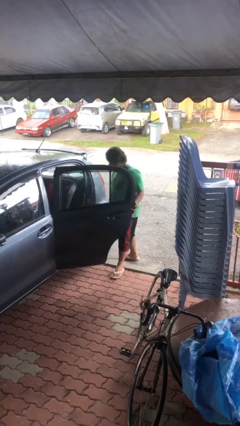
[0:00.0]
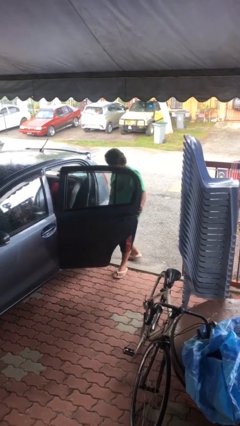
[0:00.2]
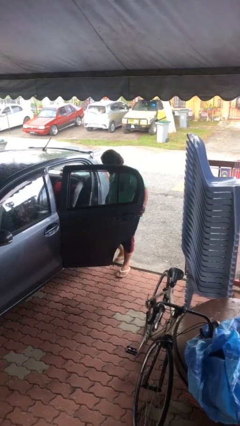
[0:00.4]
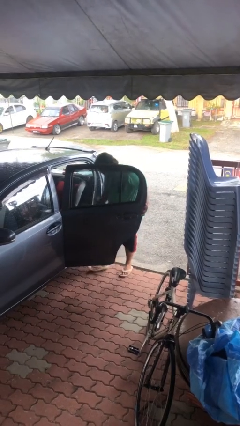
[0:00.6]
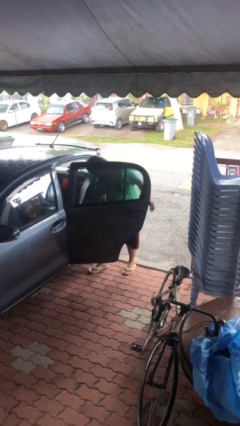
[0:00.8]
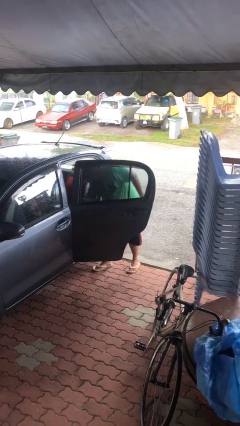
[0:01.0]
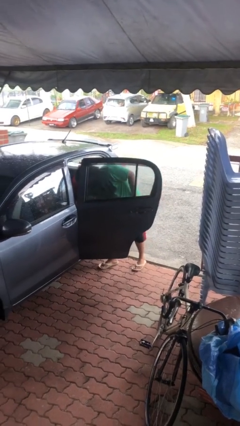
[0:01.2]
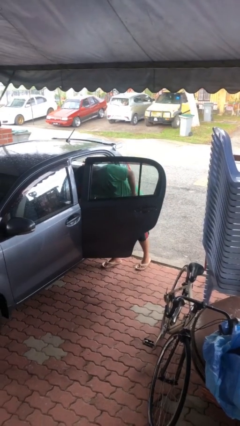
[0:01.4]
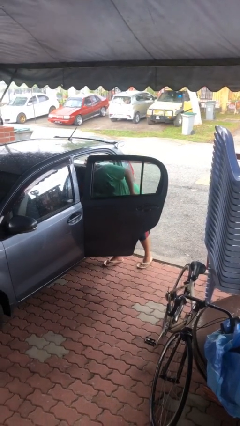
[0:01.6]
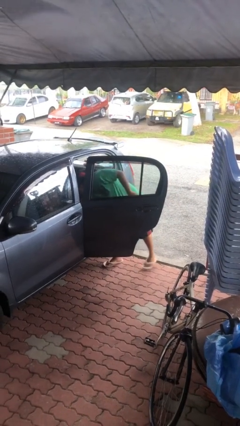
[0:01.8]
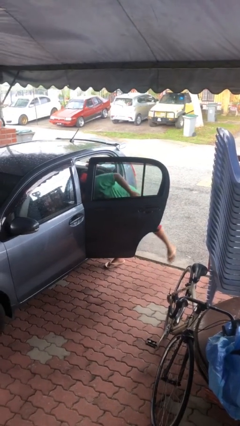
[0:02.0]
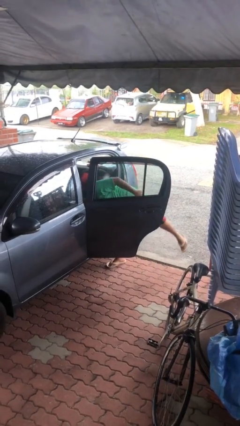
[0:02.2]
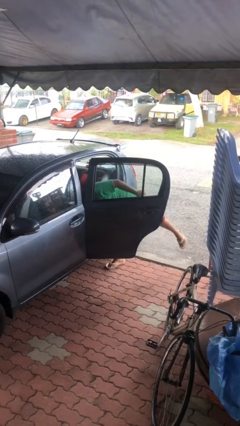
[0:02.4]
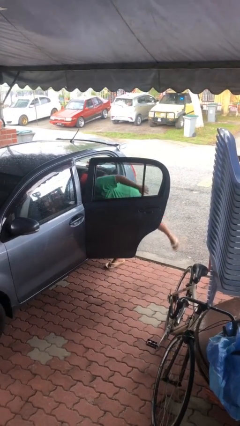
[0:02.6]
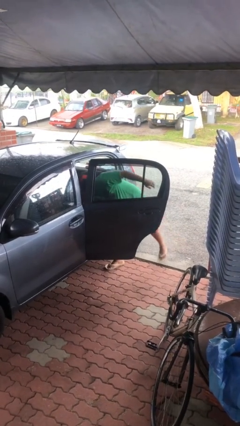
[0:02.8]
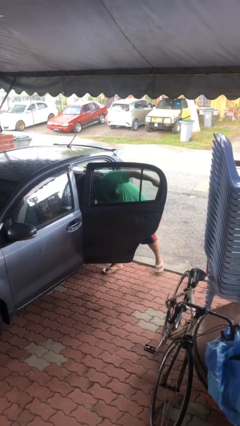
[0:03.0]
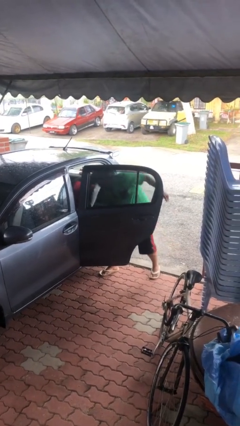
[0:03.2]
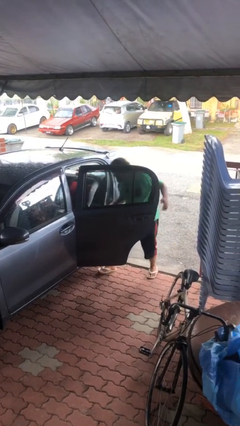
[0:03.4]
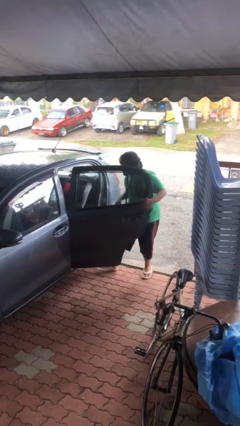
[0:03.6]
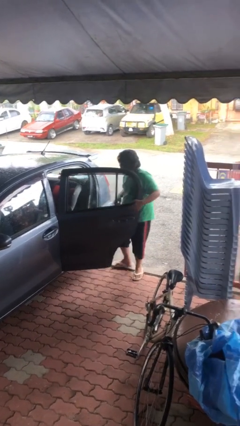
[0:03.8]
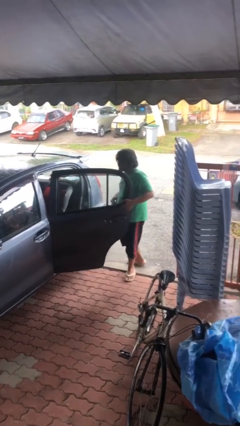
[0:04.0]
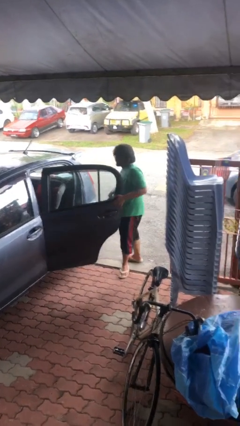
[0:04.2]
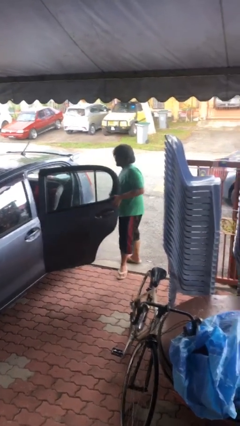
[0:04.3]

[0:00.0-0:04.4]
person unloads car

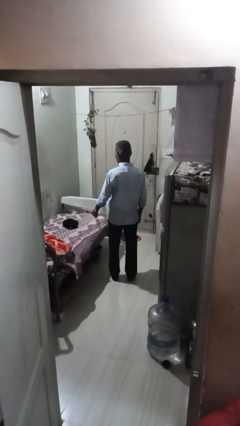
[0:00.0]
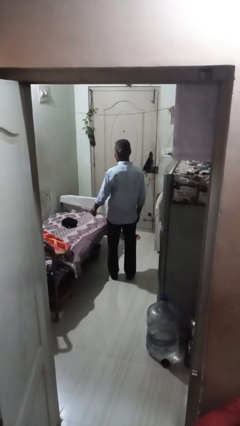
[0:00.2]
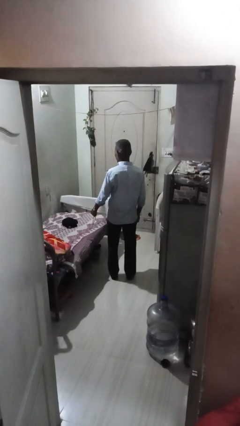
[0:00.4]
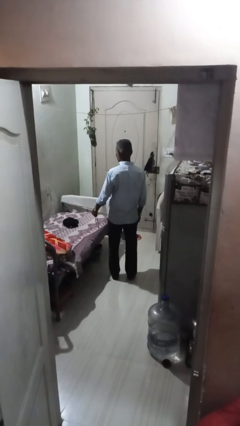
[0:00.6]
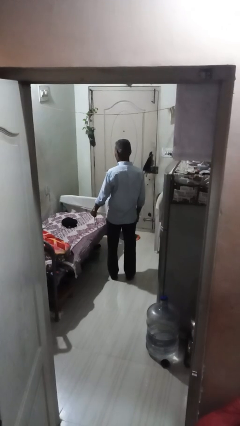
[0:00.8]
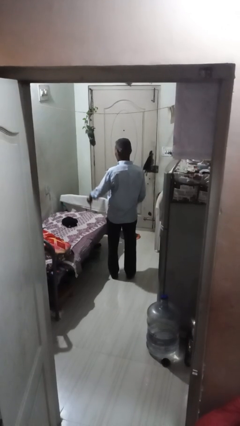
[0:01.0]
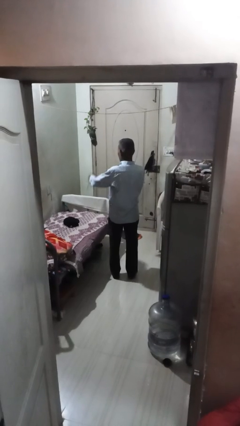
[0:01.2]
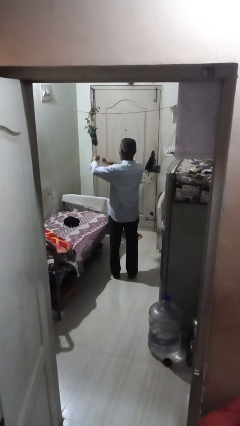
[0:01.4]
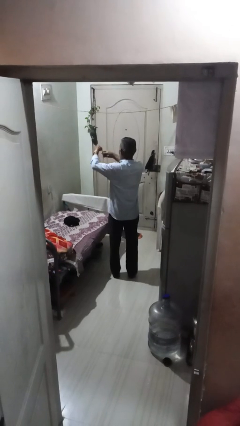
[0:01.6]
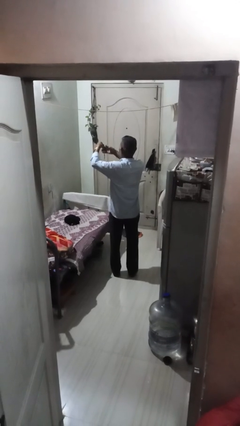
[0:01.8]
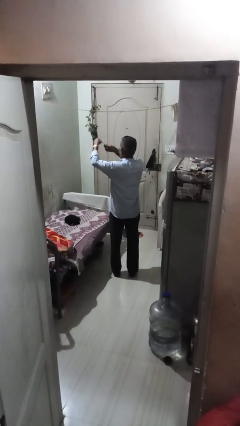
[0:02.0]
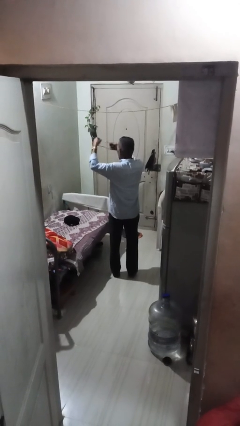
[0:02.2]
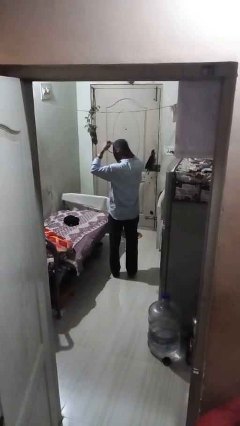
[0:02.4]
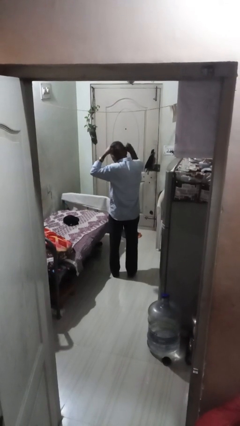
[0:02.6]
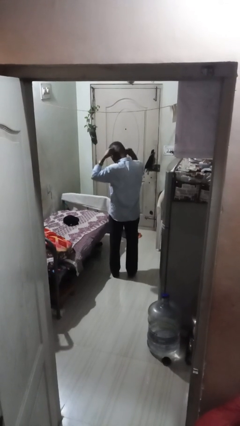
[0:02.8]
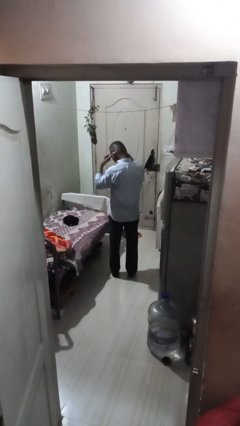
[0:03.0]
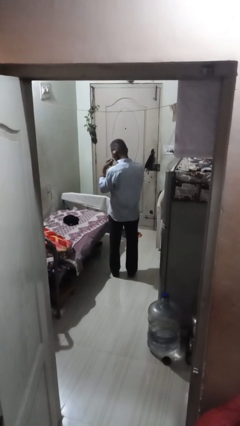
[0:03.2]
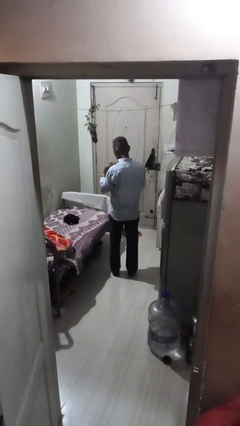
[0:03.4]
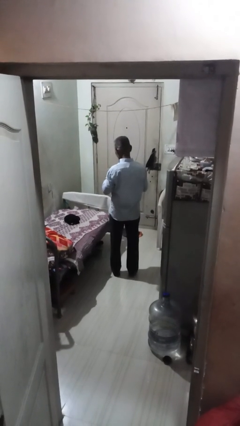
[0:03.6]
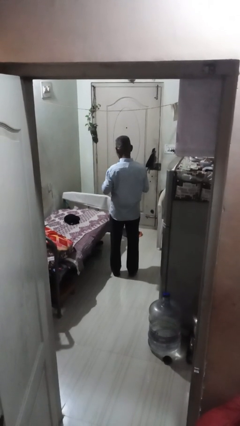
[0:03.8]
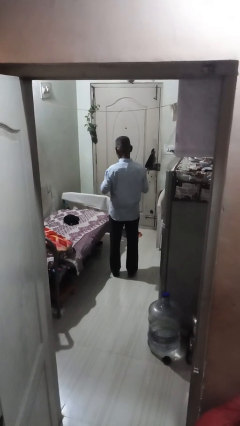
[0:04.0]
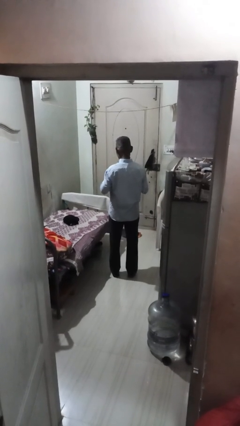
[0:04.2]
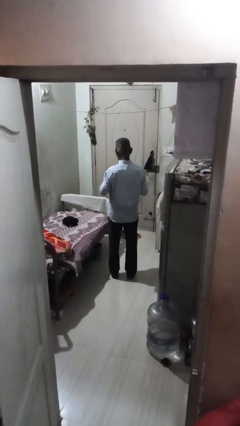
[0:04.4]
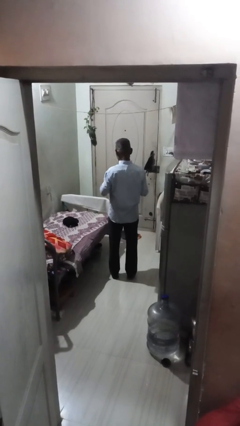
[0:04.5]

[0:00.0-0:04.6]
person puts on necklace

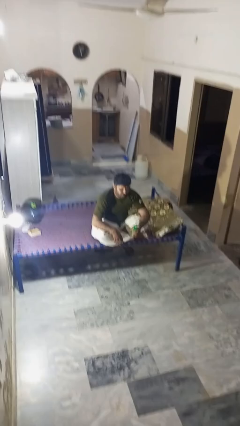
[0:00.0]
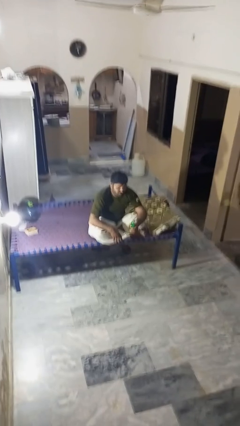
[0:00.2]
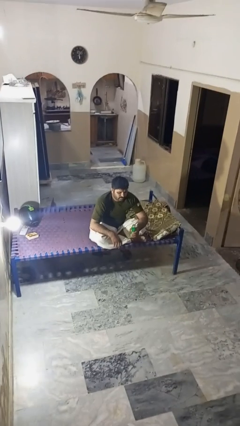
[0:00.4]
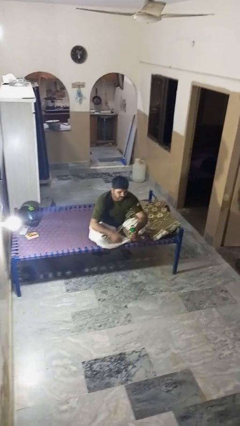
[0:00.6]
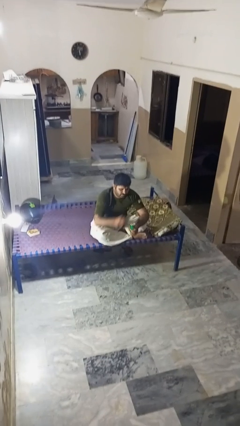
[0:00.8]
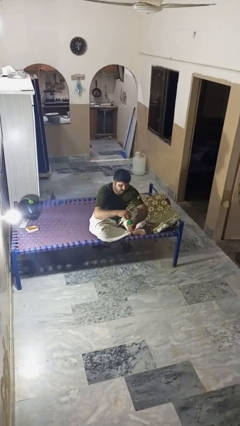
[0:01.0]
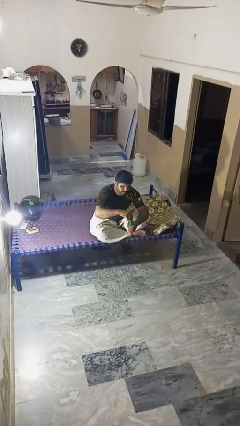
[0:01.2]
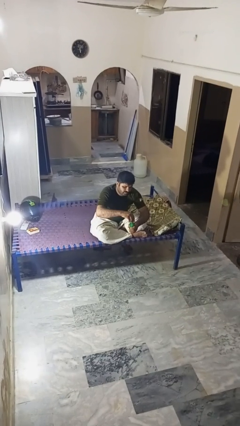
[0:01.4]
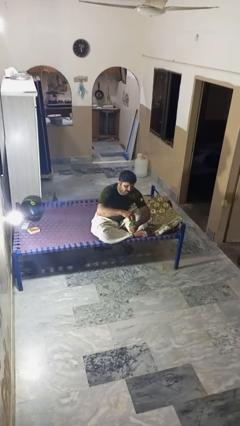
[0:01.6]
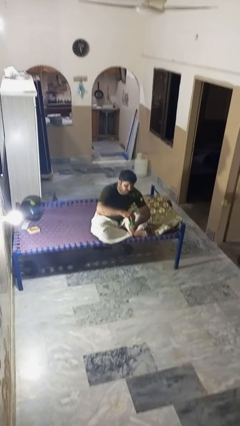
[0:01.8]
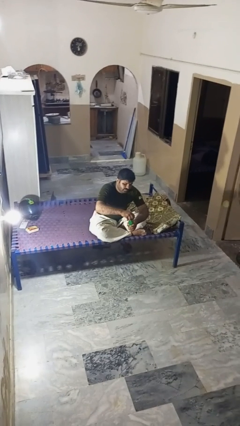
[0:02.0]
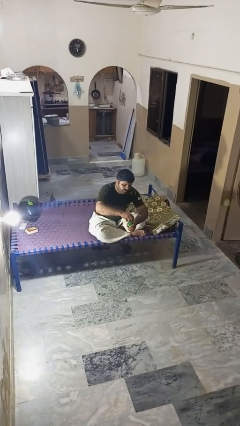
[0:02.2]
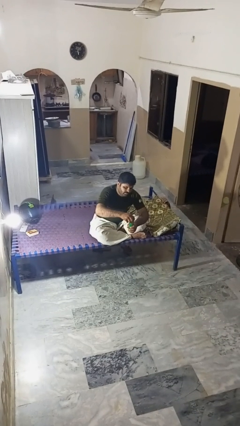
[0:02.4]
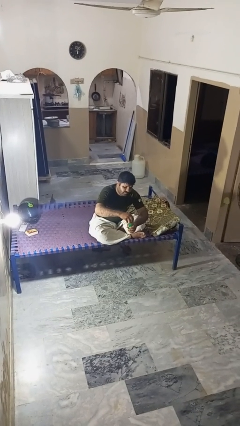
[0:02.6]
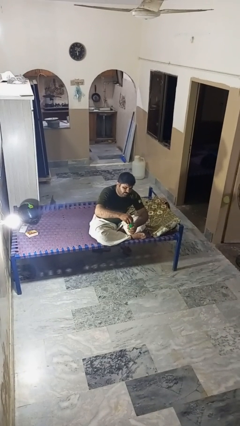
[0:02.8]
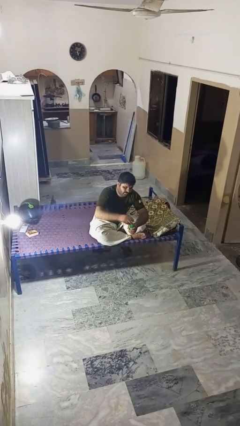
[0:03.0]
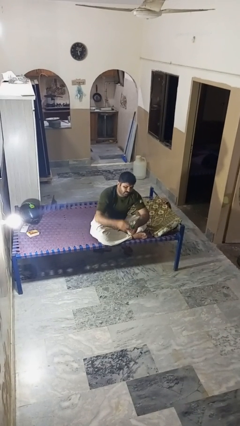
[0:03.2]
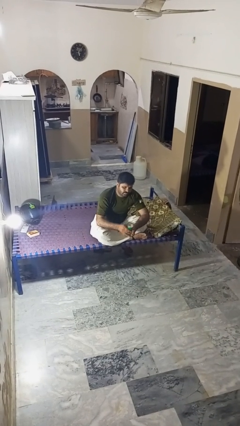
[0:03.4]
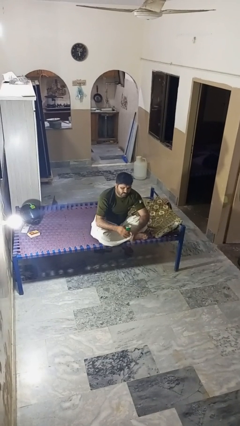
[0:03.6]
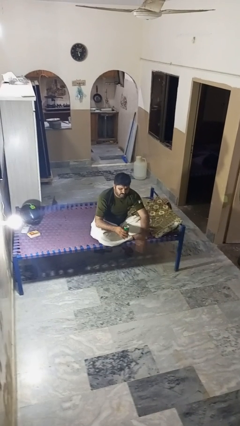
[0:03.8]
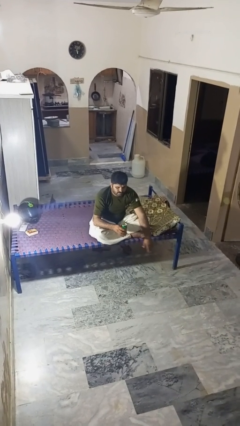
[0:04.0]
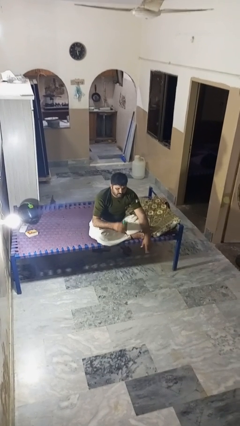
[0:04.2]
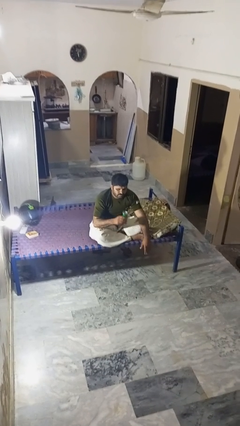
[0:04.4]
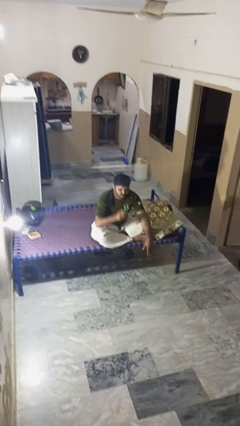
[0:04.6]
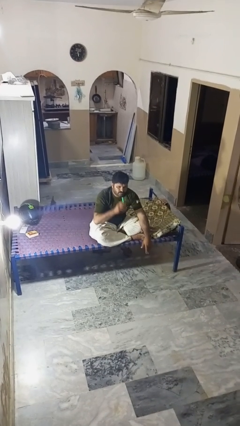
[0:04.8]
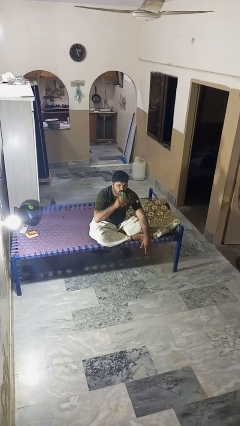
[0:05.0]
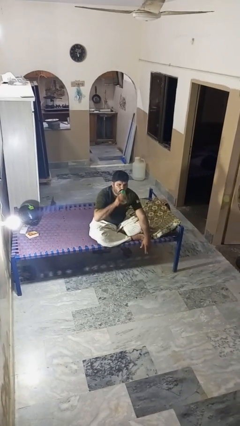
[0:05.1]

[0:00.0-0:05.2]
person opens beverage can

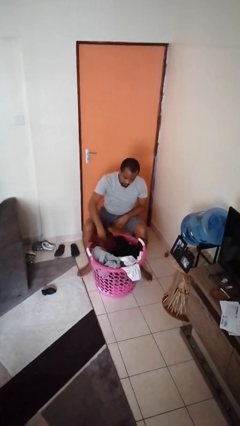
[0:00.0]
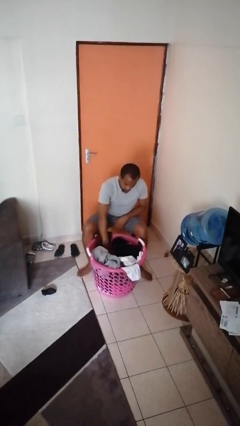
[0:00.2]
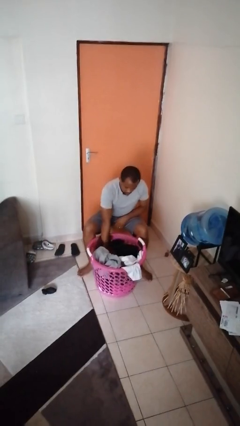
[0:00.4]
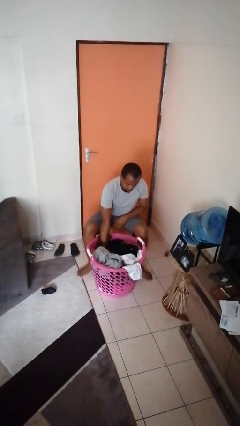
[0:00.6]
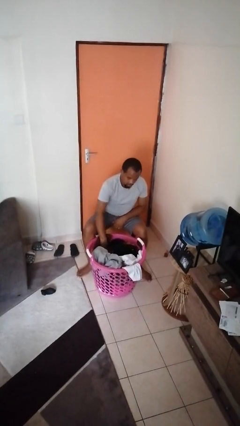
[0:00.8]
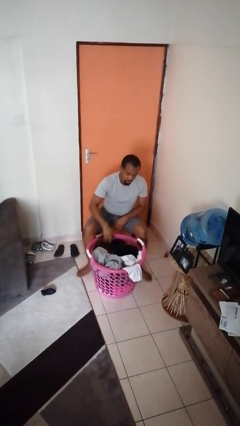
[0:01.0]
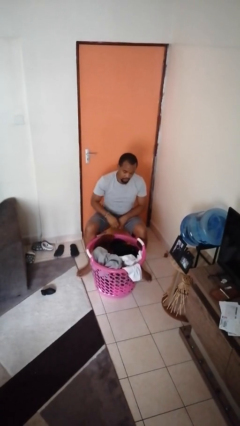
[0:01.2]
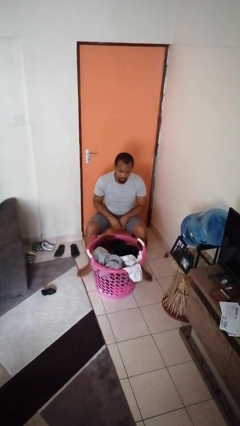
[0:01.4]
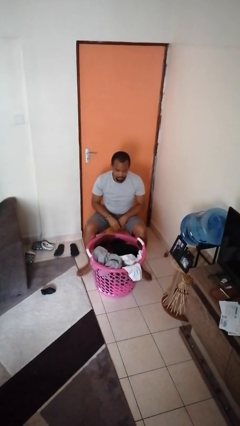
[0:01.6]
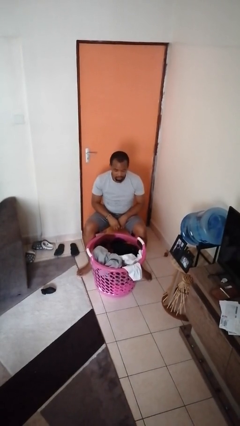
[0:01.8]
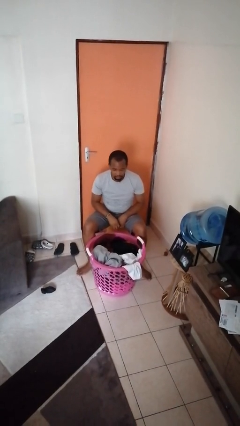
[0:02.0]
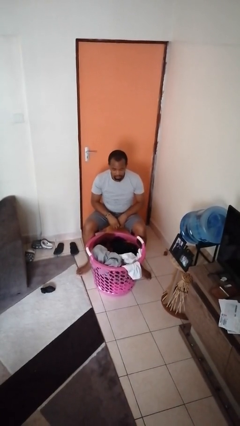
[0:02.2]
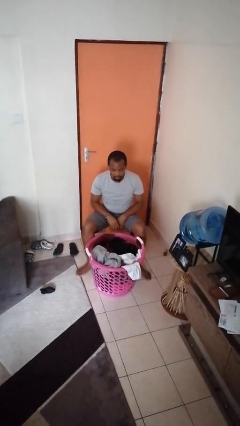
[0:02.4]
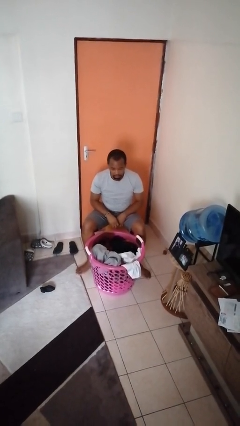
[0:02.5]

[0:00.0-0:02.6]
person puts object into basket

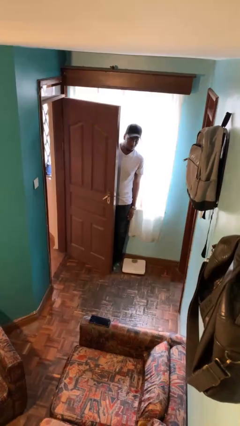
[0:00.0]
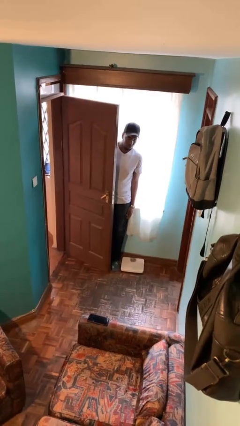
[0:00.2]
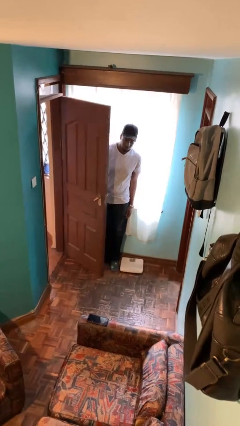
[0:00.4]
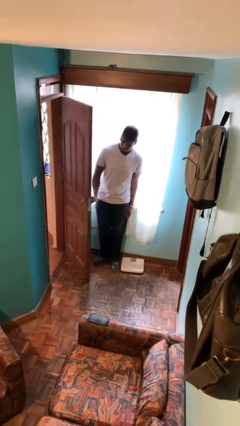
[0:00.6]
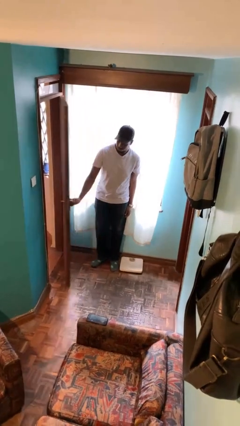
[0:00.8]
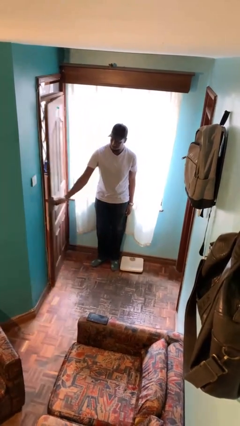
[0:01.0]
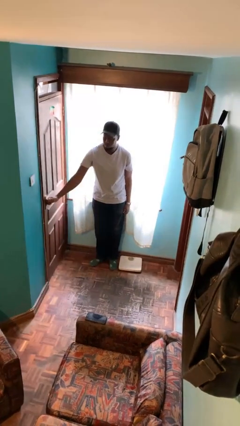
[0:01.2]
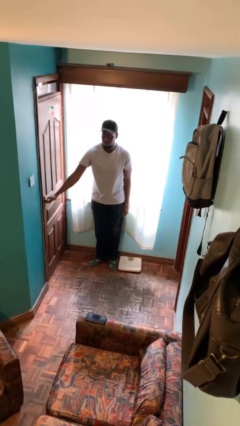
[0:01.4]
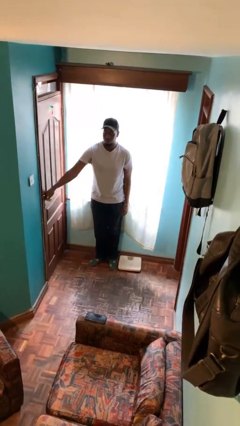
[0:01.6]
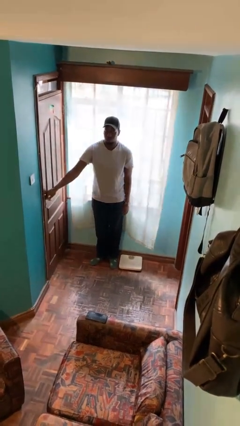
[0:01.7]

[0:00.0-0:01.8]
person closes facility door
